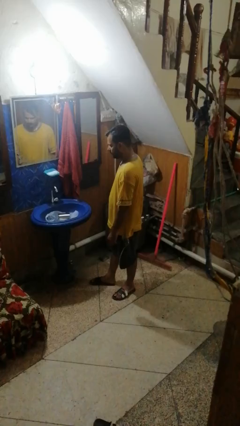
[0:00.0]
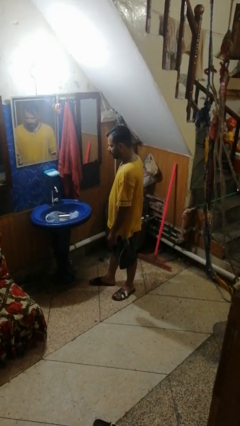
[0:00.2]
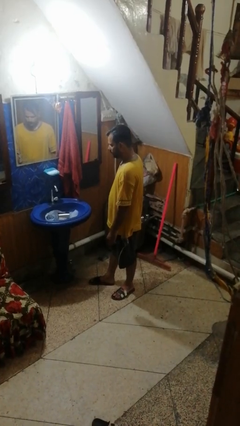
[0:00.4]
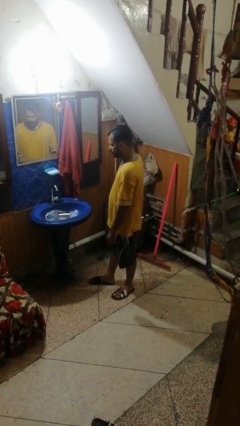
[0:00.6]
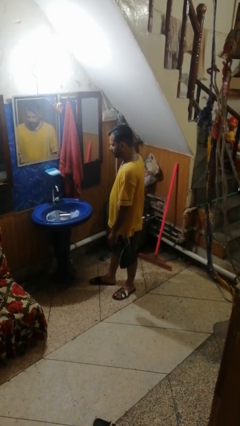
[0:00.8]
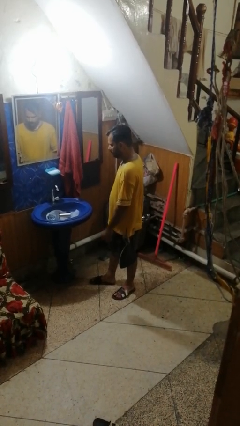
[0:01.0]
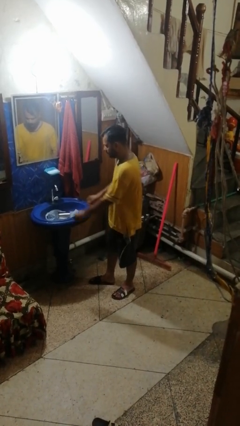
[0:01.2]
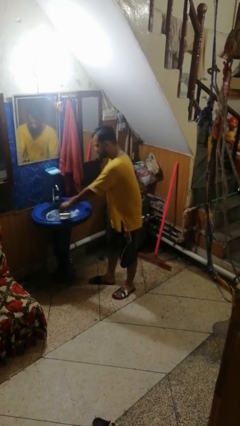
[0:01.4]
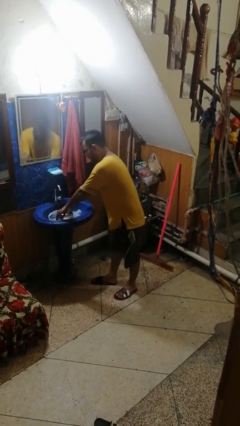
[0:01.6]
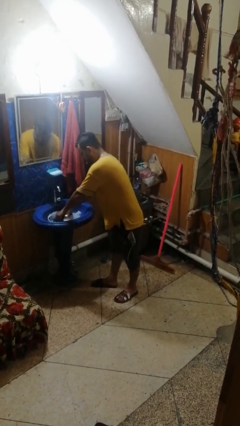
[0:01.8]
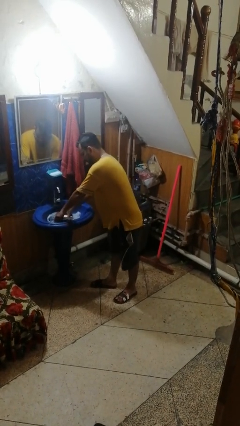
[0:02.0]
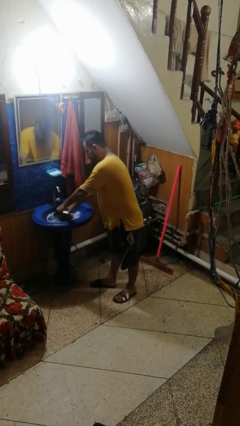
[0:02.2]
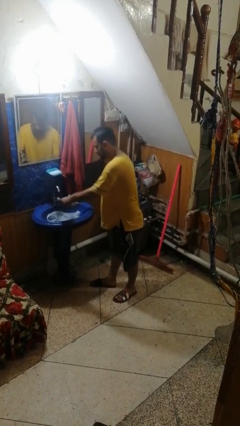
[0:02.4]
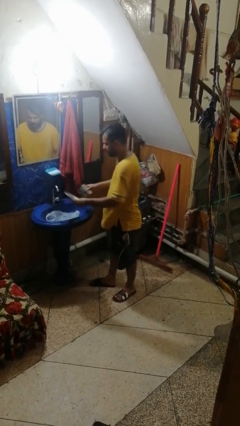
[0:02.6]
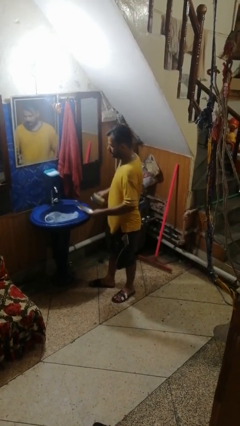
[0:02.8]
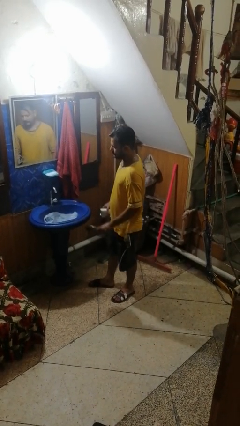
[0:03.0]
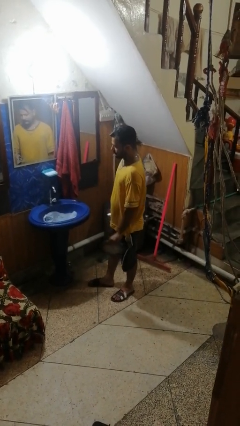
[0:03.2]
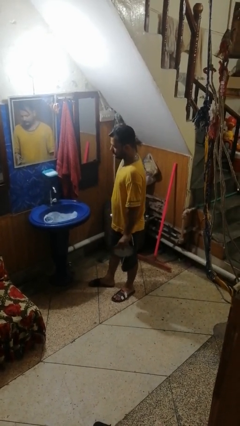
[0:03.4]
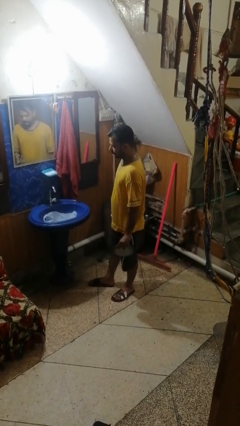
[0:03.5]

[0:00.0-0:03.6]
person unloads dishwasher

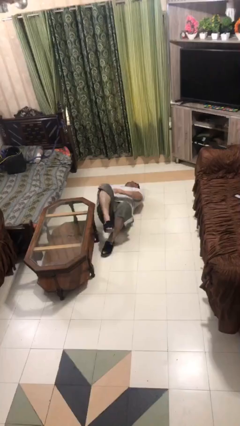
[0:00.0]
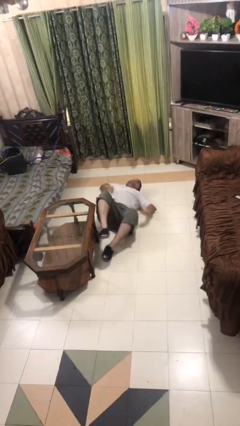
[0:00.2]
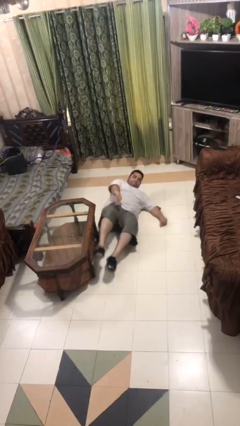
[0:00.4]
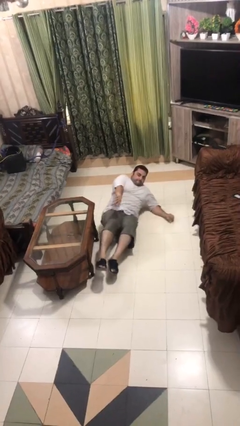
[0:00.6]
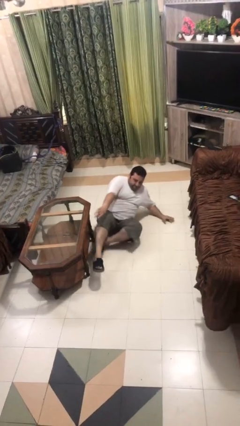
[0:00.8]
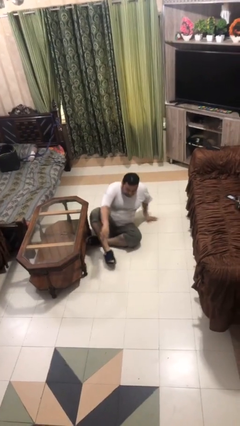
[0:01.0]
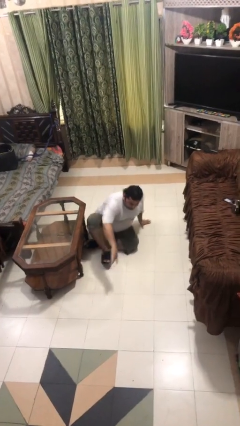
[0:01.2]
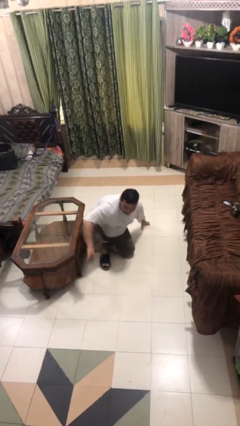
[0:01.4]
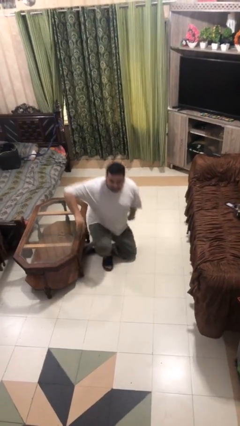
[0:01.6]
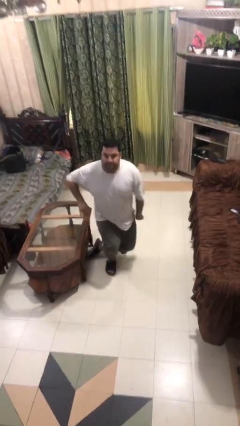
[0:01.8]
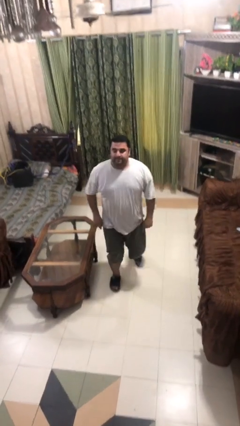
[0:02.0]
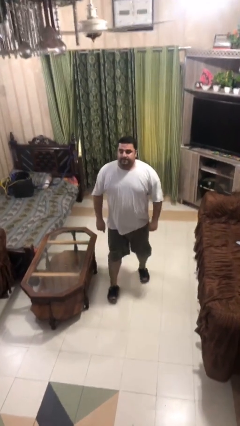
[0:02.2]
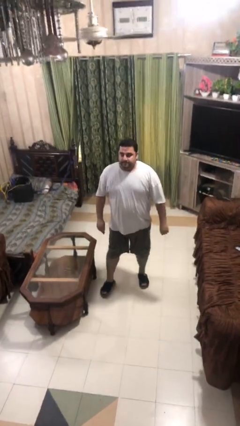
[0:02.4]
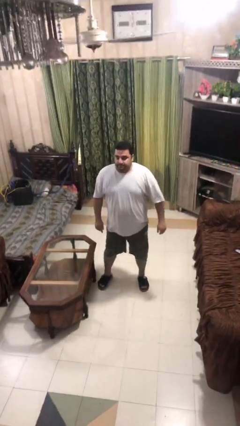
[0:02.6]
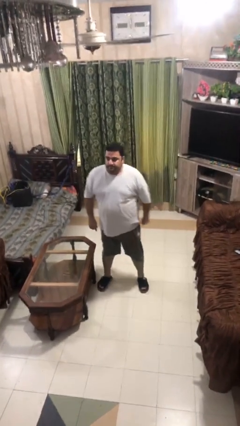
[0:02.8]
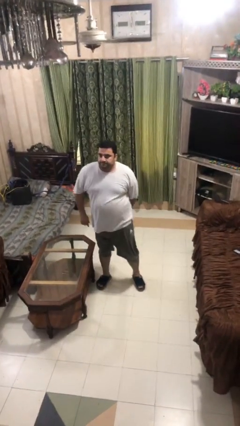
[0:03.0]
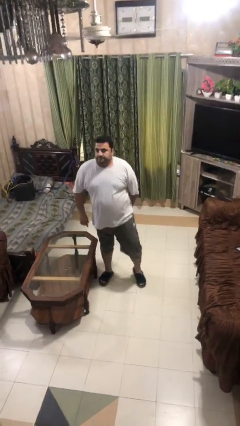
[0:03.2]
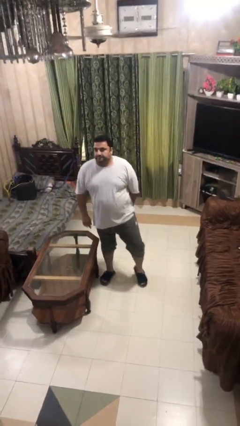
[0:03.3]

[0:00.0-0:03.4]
person stands up from floor

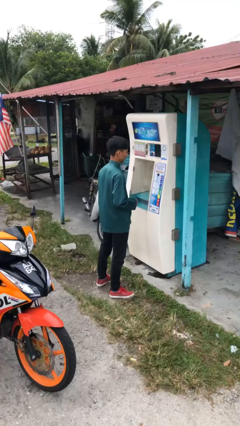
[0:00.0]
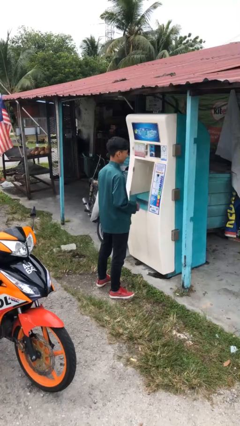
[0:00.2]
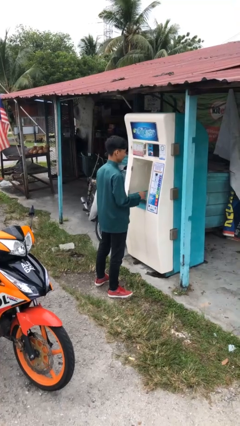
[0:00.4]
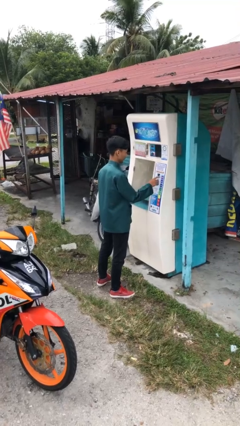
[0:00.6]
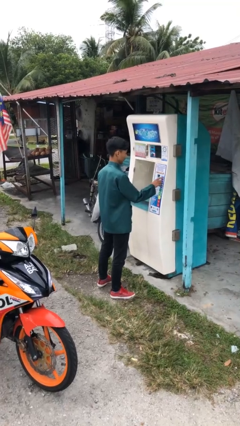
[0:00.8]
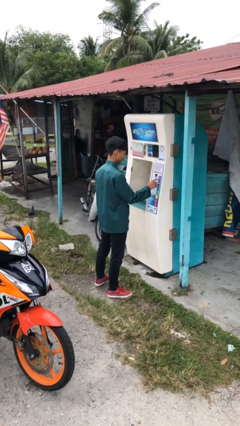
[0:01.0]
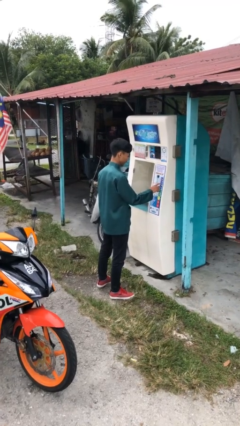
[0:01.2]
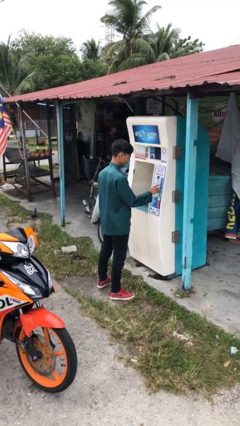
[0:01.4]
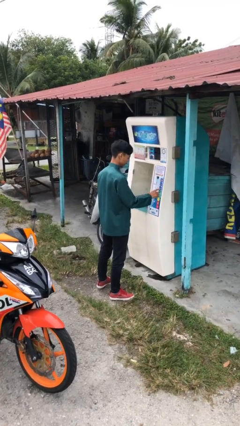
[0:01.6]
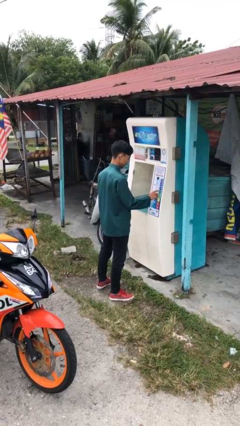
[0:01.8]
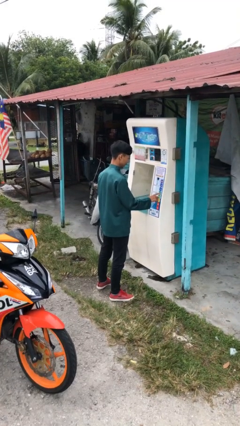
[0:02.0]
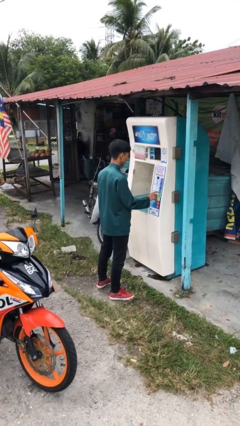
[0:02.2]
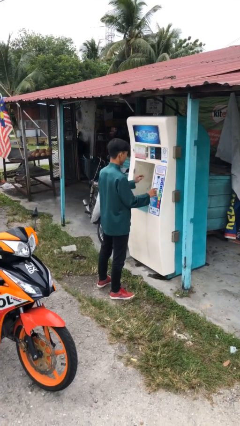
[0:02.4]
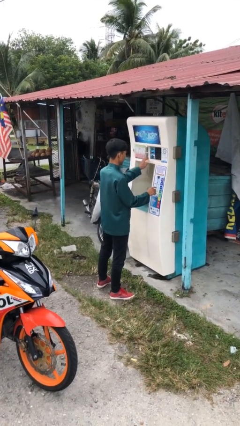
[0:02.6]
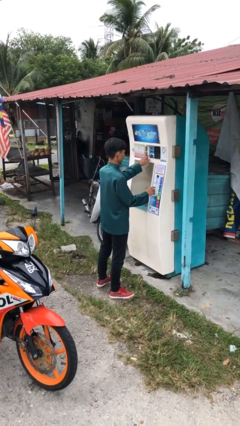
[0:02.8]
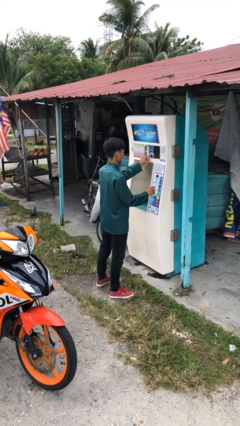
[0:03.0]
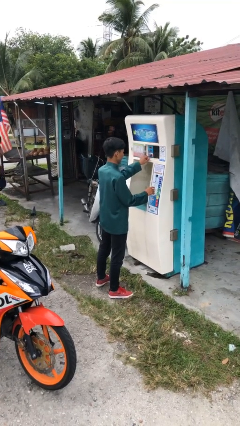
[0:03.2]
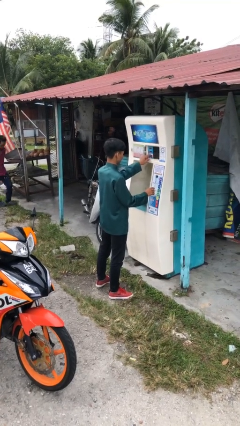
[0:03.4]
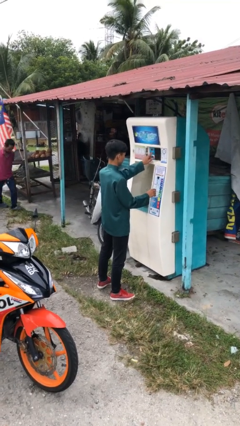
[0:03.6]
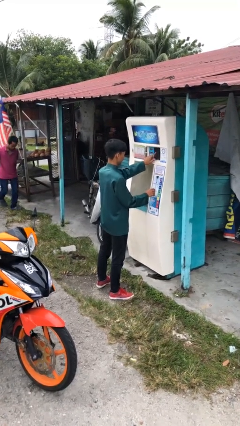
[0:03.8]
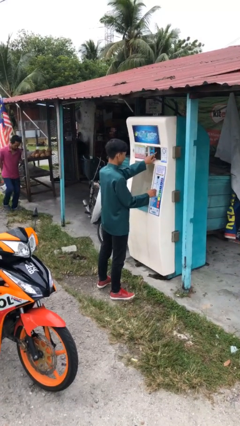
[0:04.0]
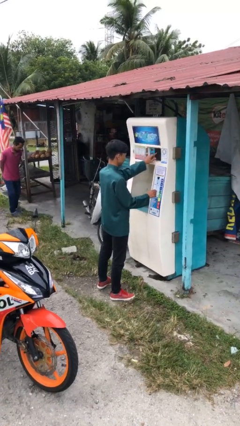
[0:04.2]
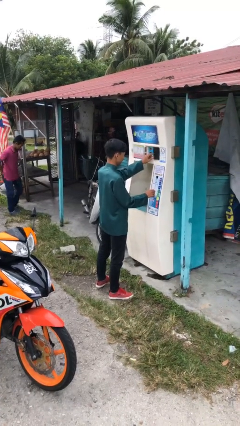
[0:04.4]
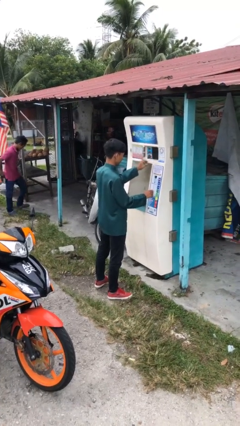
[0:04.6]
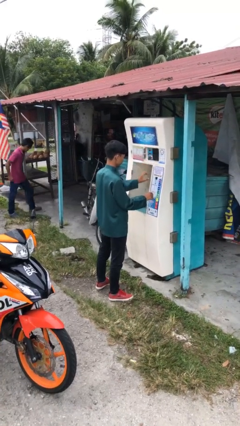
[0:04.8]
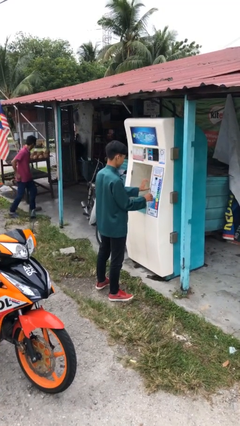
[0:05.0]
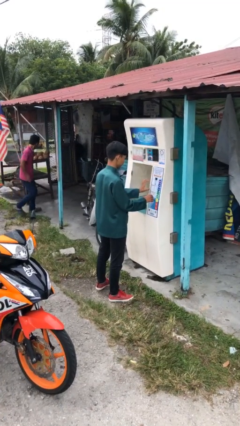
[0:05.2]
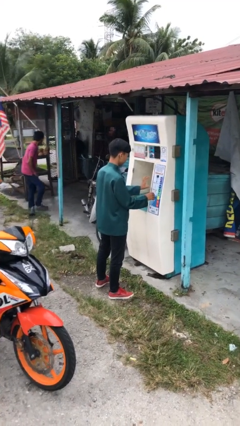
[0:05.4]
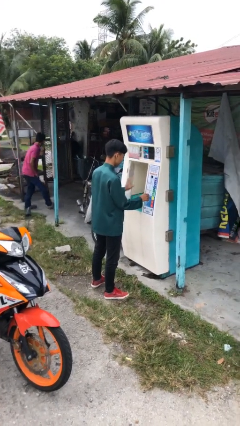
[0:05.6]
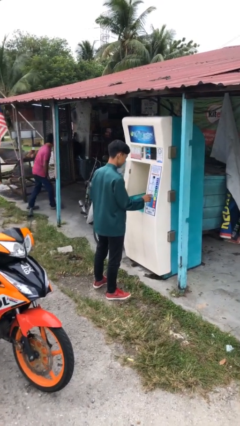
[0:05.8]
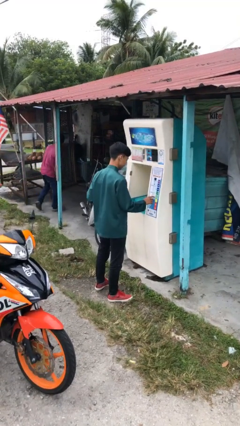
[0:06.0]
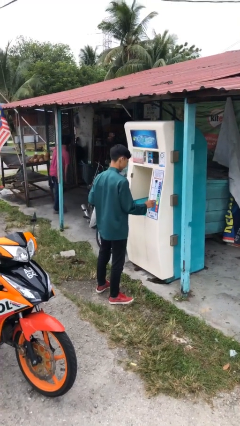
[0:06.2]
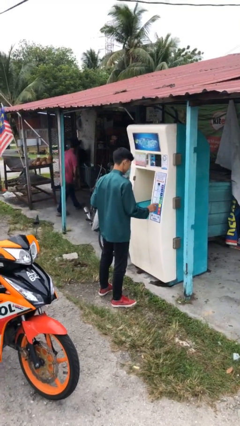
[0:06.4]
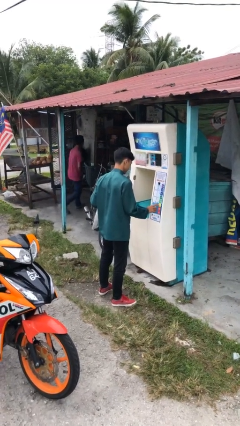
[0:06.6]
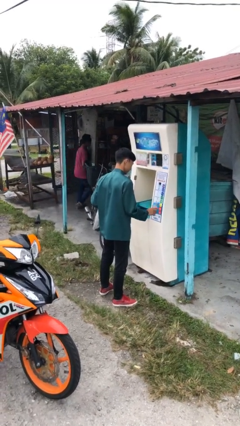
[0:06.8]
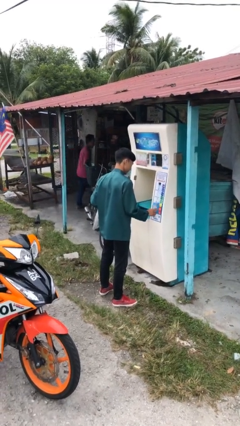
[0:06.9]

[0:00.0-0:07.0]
person purchases from machine

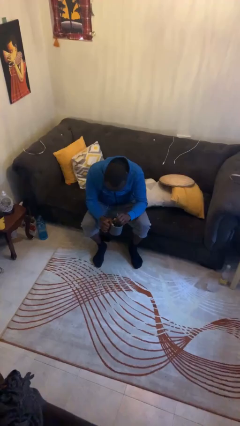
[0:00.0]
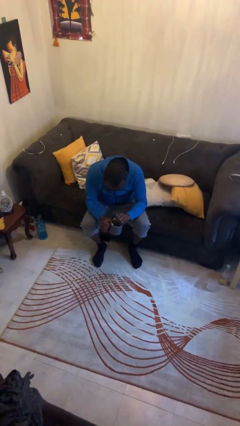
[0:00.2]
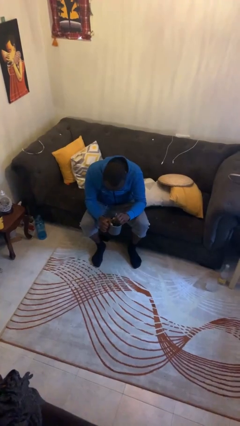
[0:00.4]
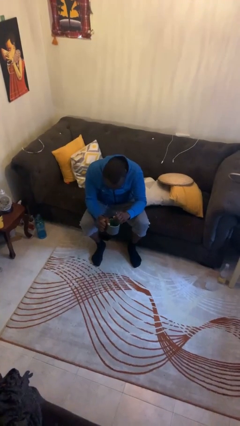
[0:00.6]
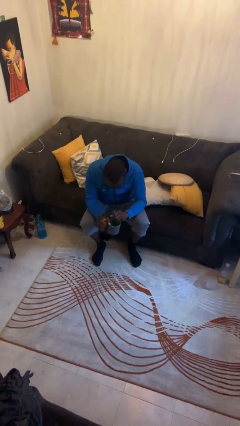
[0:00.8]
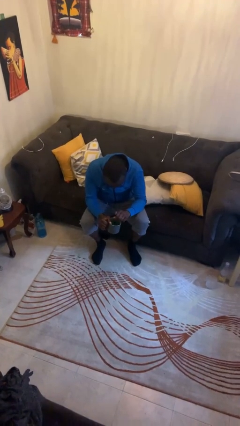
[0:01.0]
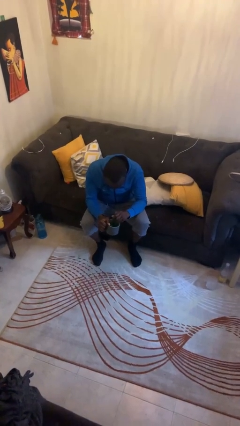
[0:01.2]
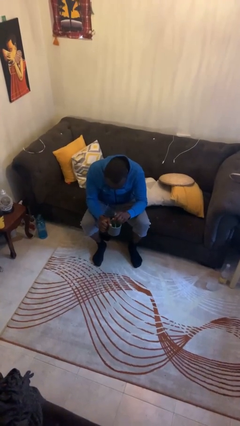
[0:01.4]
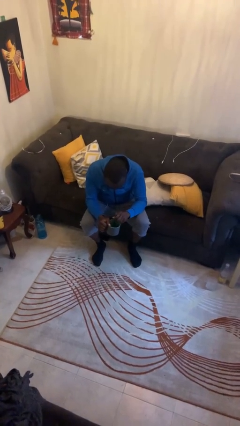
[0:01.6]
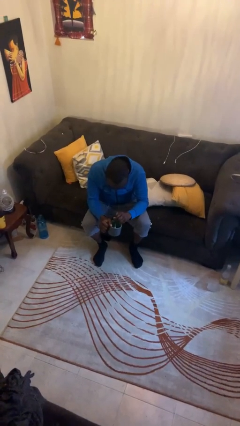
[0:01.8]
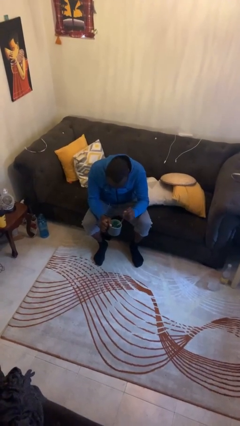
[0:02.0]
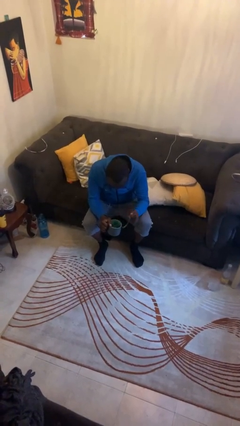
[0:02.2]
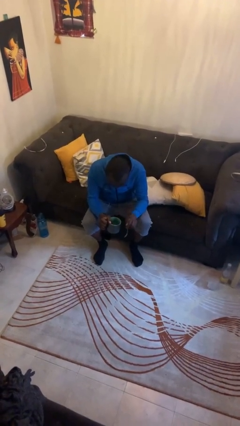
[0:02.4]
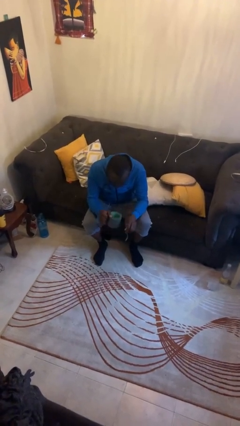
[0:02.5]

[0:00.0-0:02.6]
person stirs mug

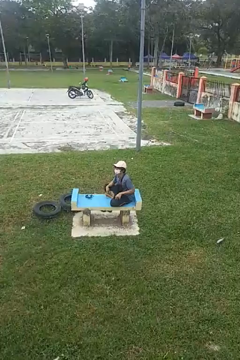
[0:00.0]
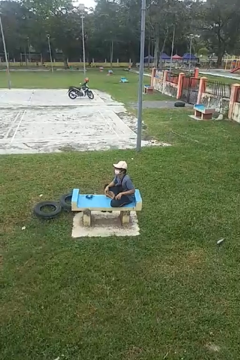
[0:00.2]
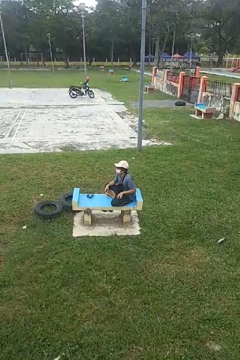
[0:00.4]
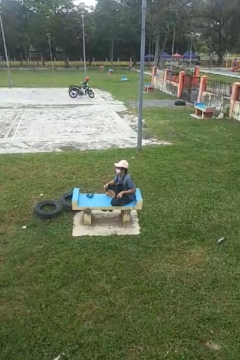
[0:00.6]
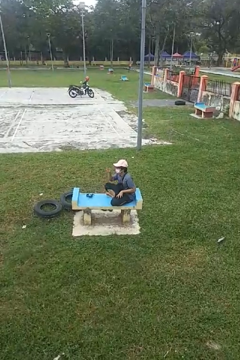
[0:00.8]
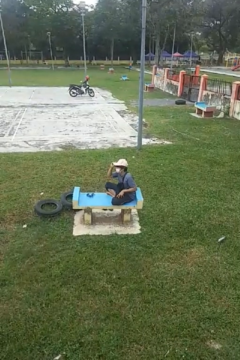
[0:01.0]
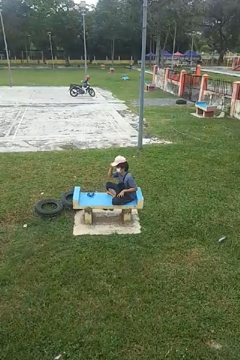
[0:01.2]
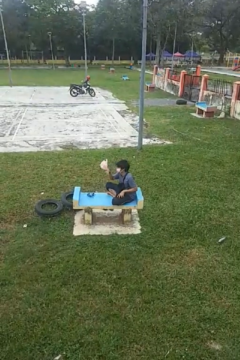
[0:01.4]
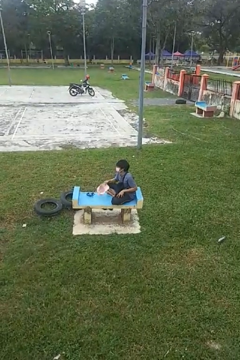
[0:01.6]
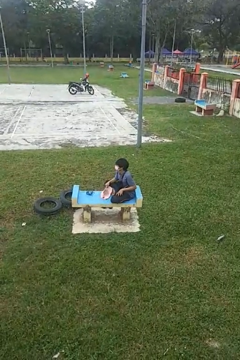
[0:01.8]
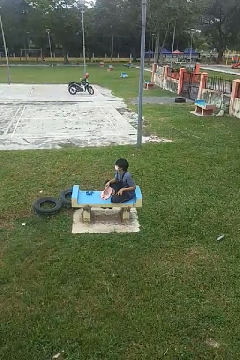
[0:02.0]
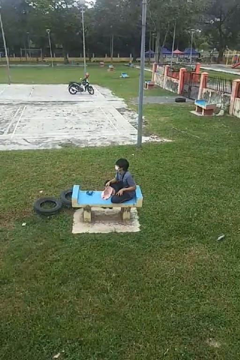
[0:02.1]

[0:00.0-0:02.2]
person takes off hat
